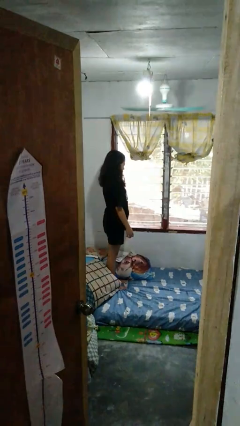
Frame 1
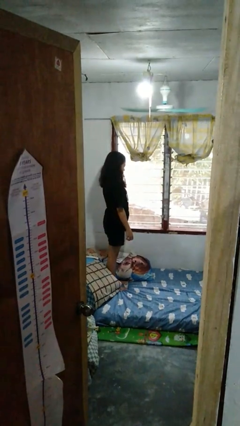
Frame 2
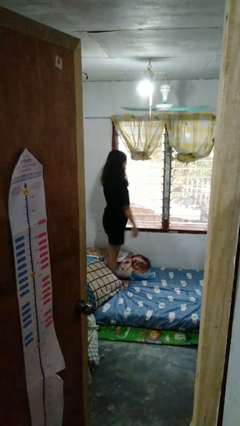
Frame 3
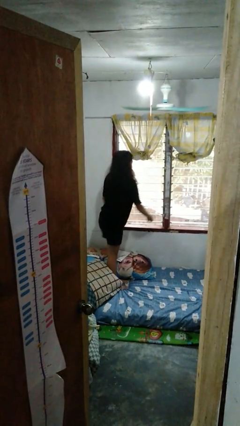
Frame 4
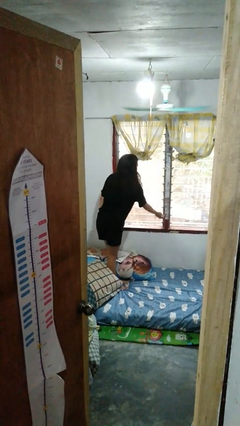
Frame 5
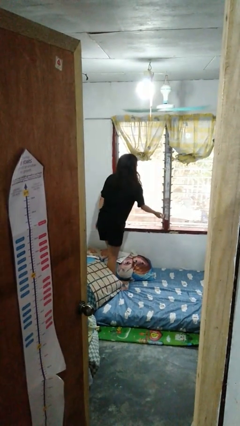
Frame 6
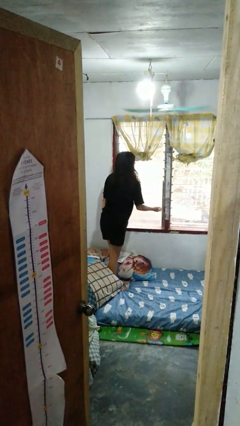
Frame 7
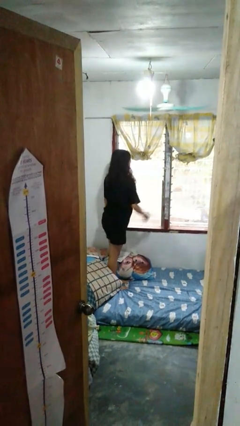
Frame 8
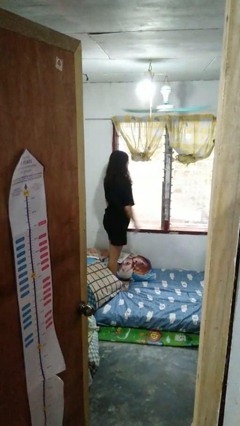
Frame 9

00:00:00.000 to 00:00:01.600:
person closes home window

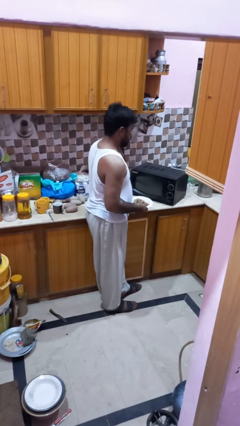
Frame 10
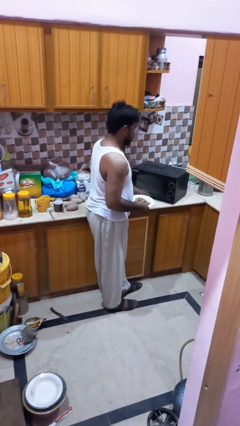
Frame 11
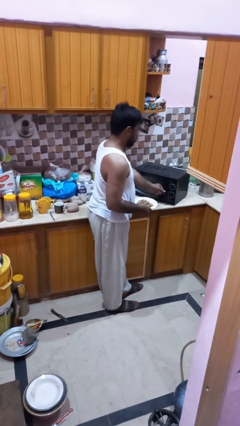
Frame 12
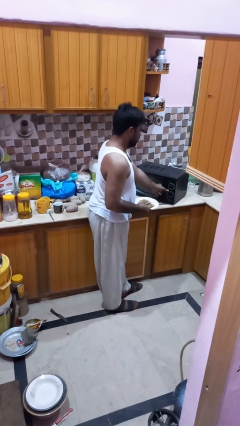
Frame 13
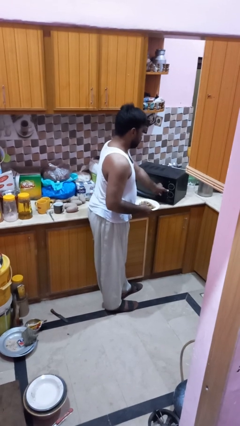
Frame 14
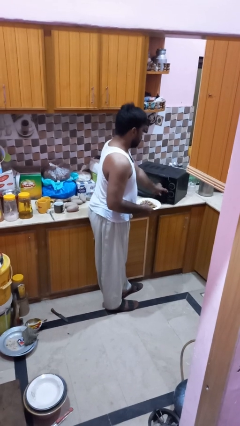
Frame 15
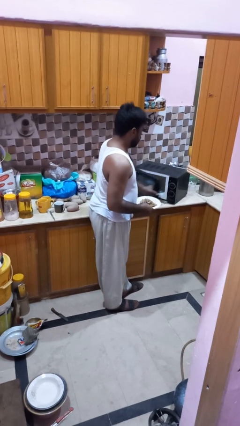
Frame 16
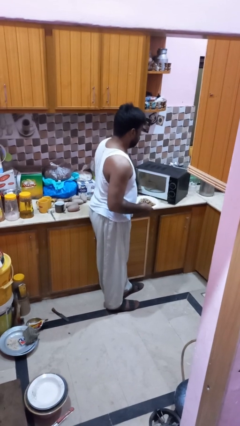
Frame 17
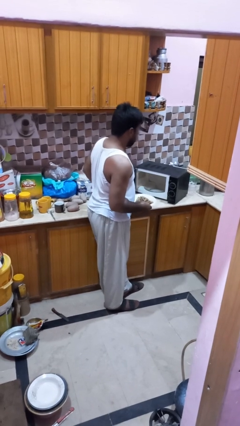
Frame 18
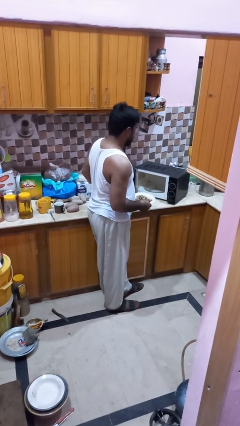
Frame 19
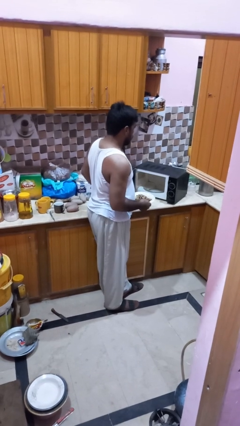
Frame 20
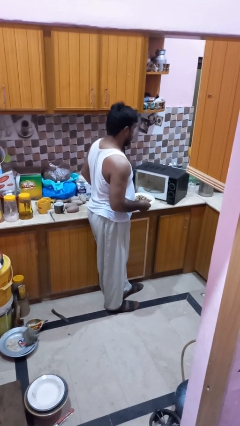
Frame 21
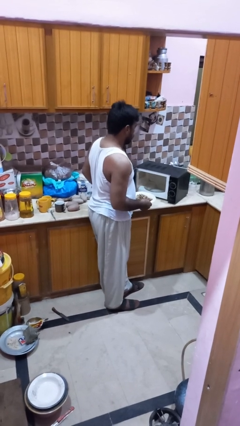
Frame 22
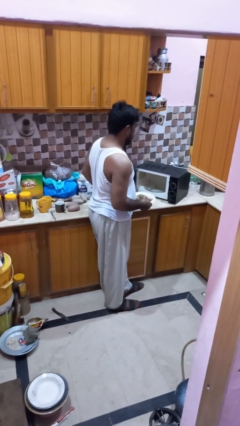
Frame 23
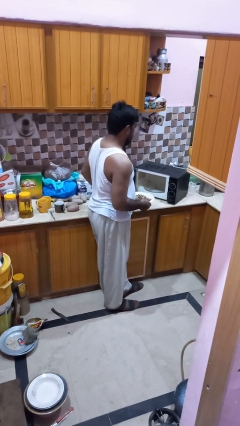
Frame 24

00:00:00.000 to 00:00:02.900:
person opens microwave

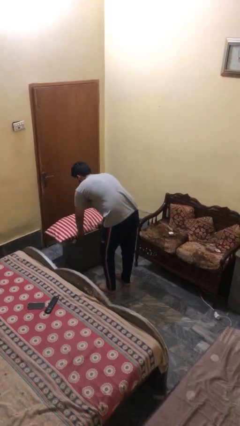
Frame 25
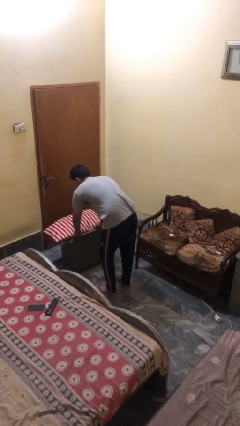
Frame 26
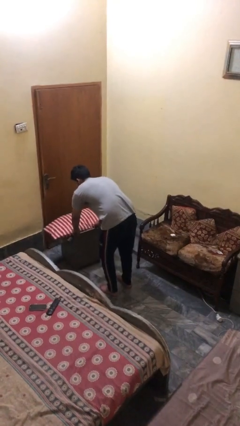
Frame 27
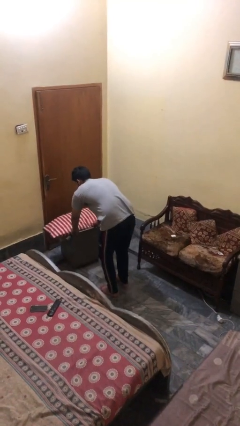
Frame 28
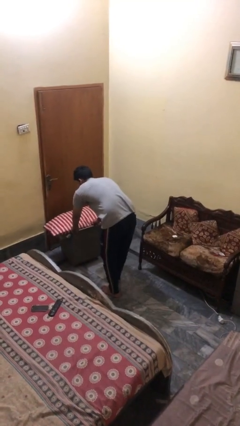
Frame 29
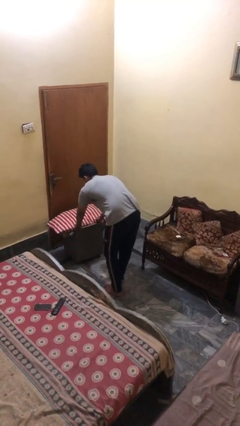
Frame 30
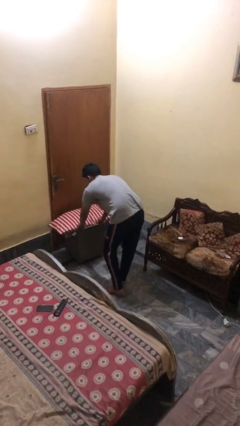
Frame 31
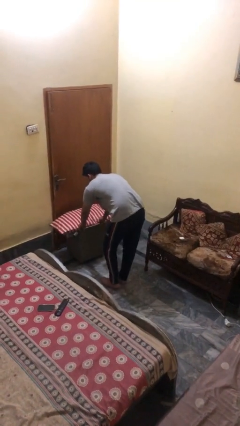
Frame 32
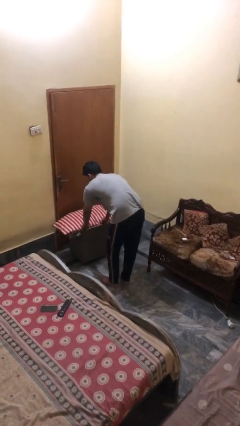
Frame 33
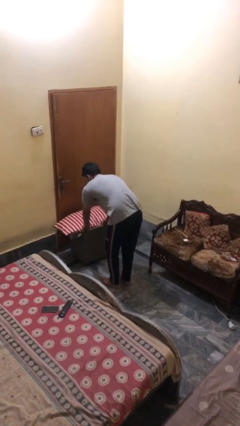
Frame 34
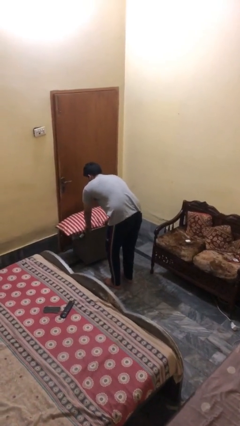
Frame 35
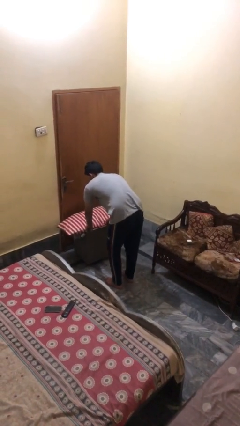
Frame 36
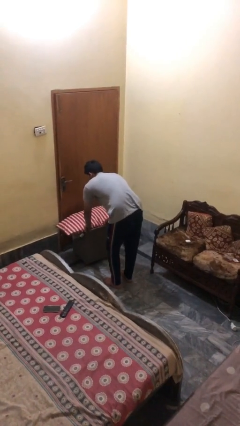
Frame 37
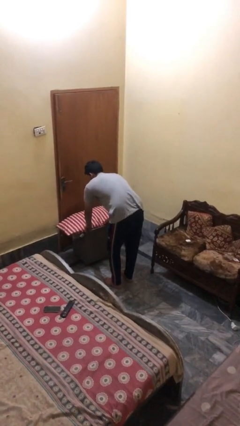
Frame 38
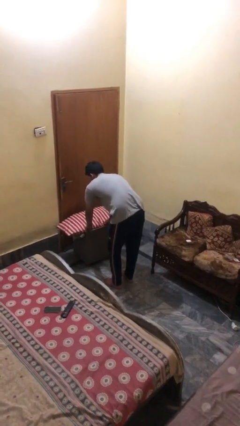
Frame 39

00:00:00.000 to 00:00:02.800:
person pushes wheeled cart

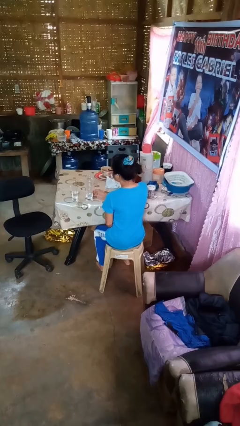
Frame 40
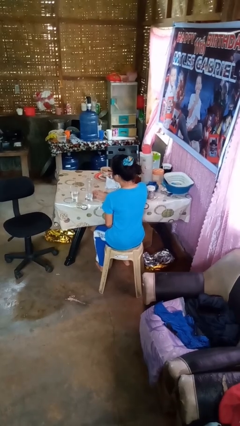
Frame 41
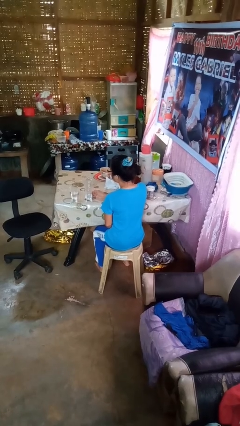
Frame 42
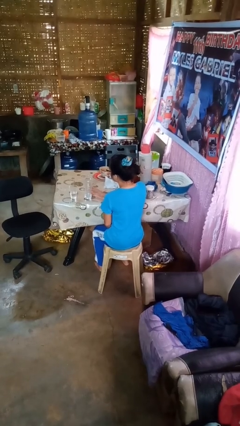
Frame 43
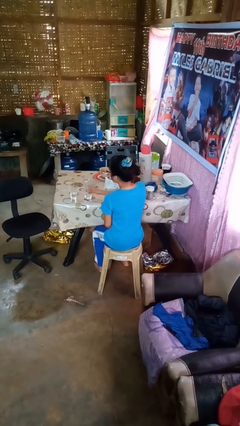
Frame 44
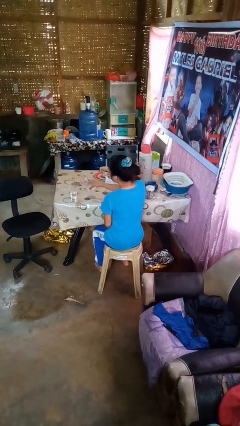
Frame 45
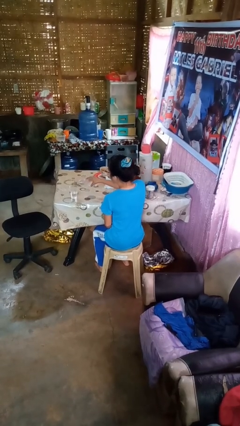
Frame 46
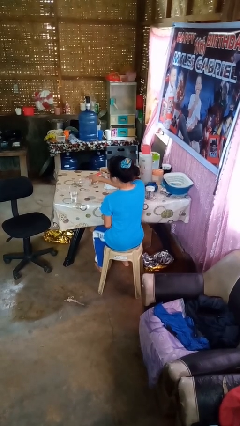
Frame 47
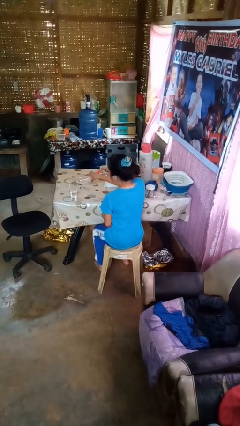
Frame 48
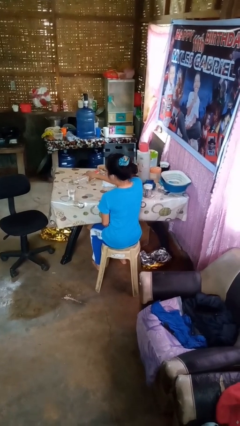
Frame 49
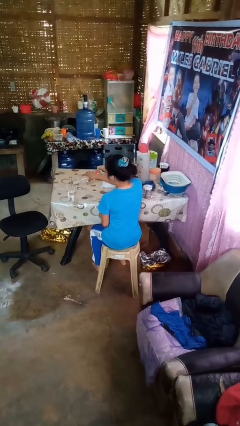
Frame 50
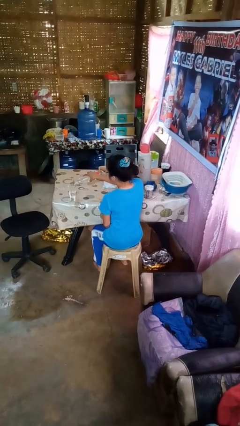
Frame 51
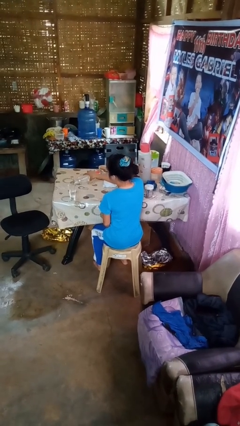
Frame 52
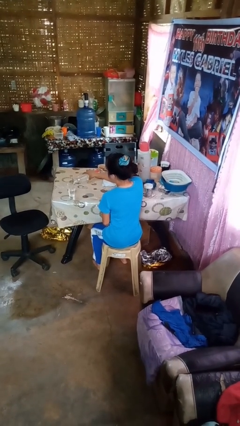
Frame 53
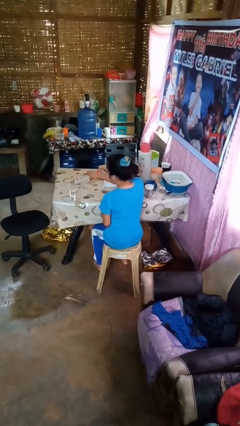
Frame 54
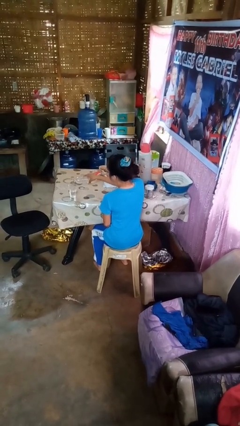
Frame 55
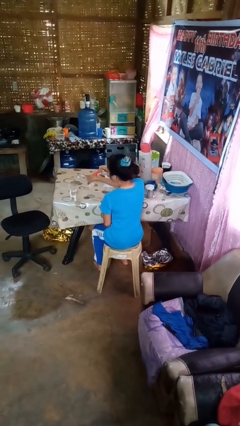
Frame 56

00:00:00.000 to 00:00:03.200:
person pours liquid into cup

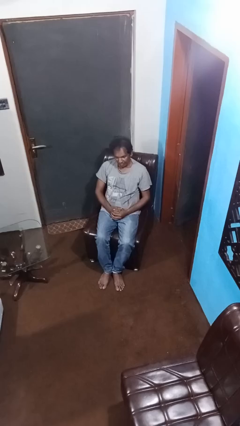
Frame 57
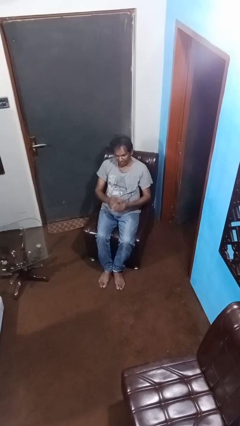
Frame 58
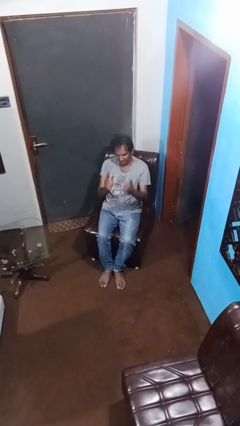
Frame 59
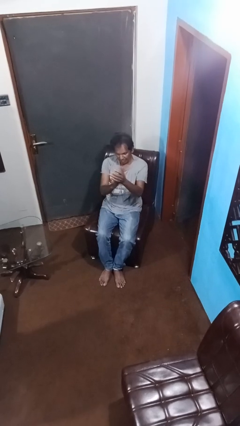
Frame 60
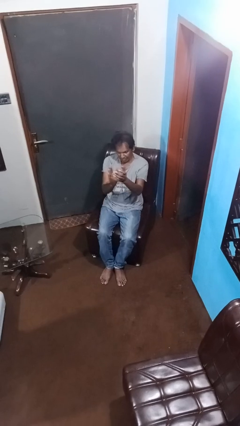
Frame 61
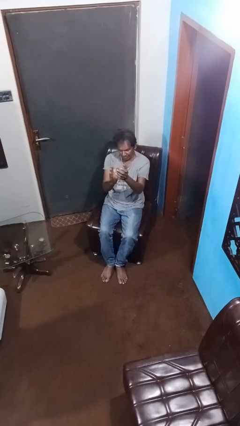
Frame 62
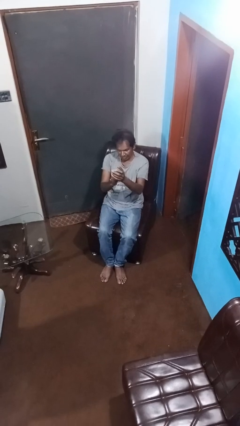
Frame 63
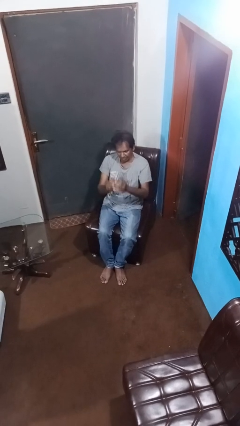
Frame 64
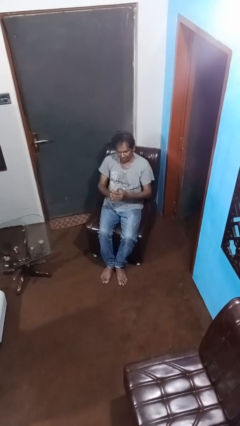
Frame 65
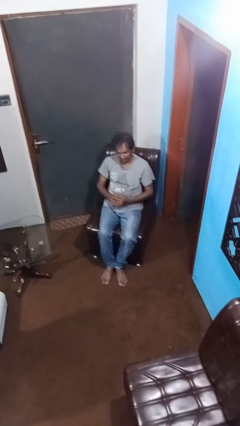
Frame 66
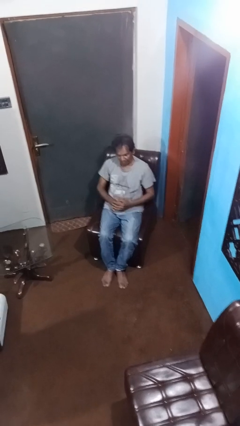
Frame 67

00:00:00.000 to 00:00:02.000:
person claps hands

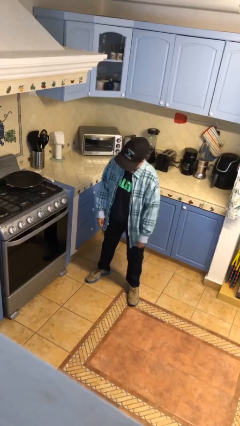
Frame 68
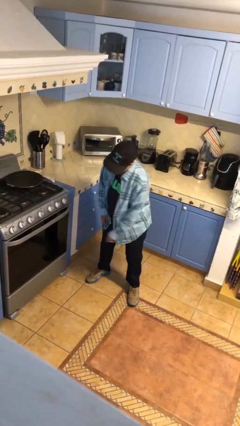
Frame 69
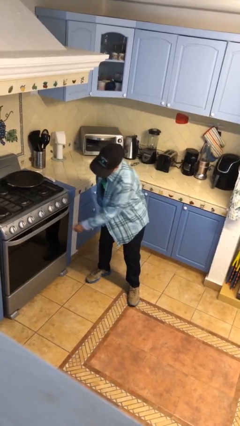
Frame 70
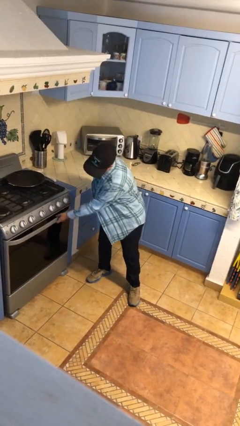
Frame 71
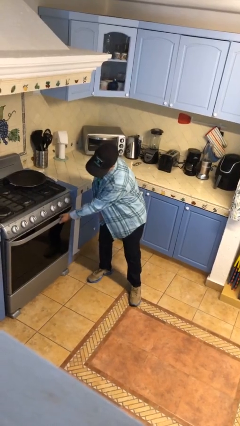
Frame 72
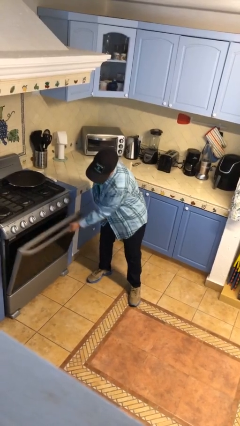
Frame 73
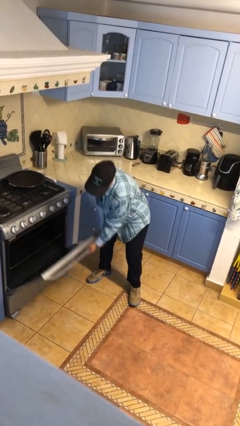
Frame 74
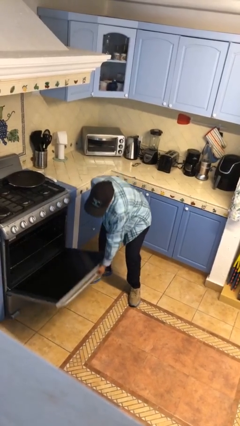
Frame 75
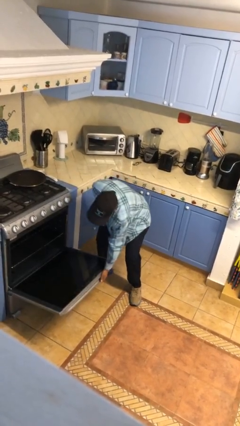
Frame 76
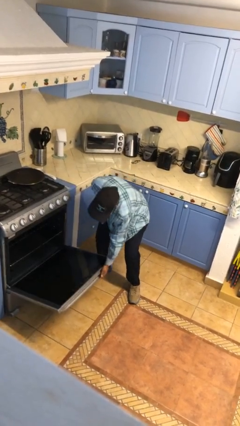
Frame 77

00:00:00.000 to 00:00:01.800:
person opens oven door

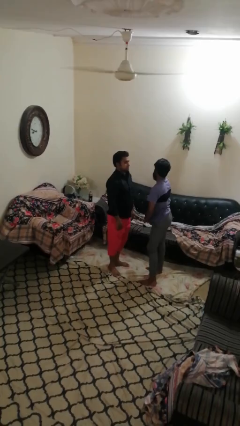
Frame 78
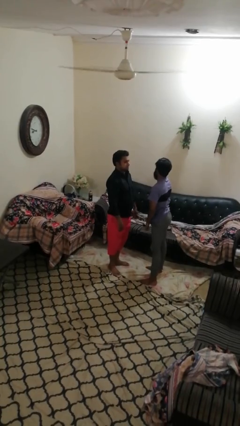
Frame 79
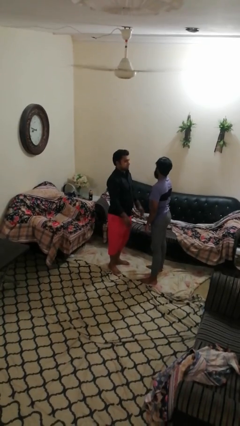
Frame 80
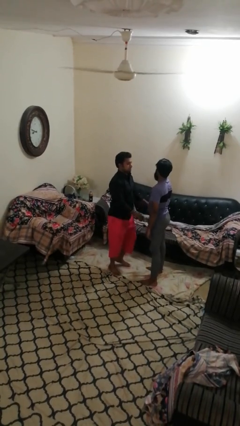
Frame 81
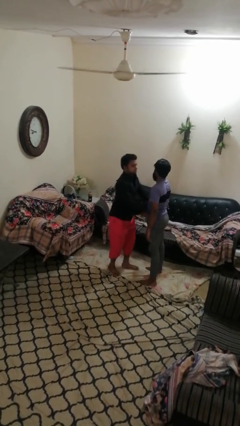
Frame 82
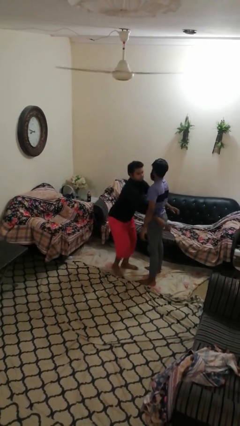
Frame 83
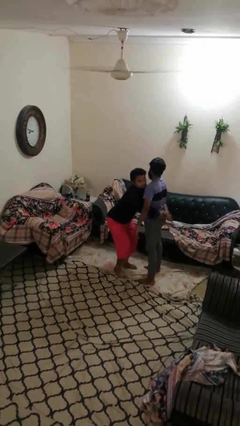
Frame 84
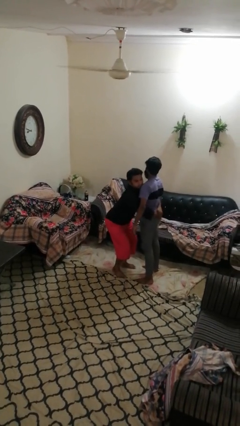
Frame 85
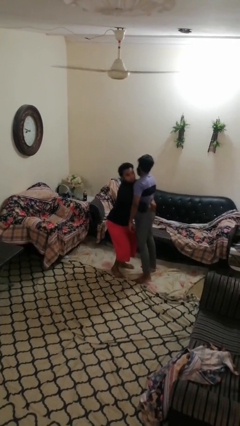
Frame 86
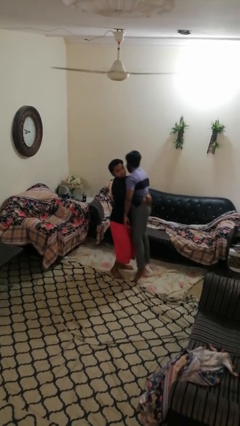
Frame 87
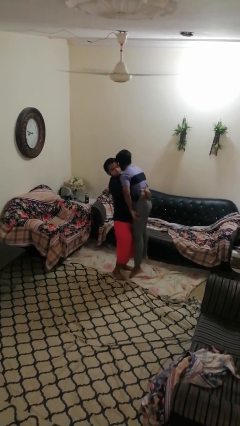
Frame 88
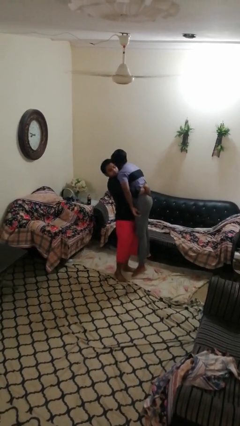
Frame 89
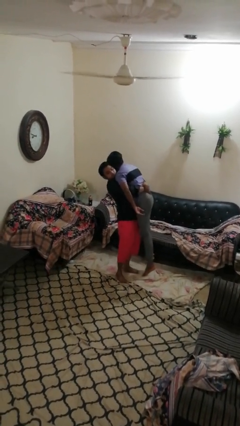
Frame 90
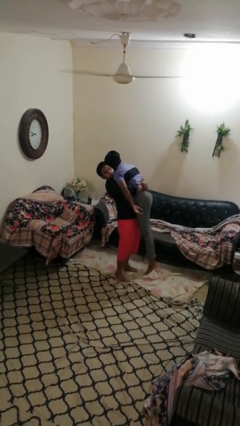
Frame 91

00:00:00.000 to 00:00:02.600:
person picks up person

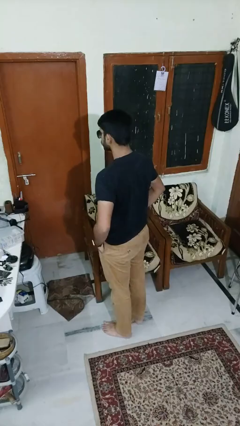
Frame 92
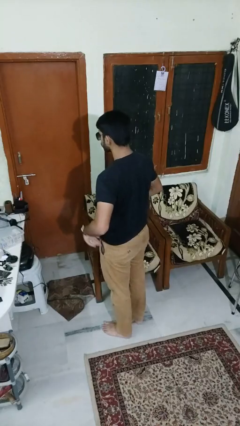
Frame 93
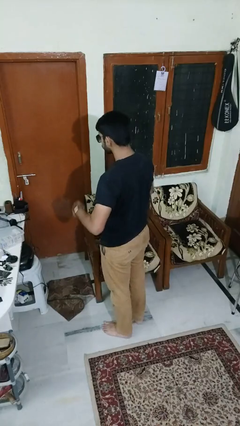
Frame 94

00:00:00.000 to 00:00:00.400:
person takes off sunglasses
